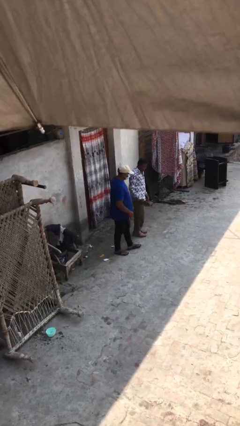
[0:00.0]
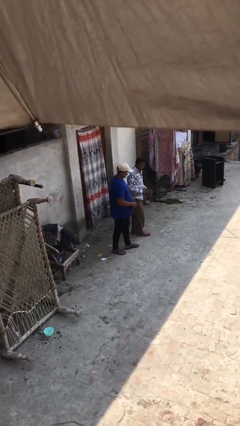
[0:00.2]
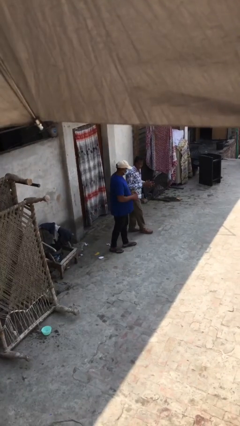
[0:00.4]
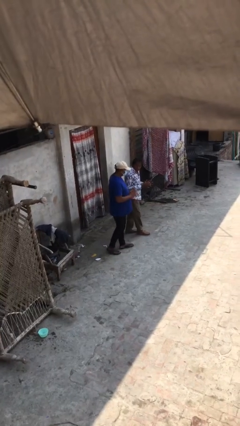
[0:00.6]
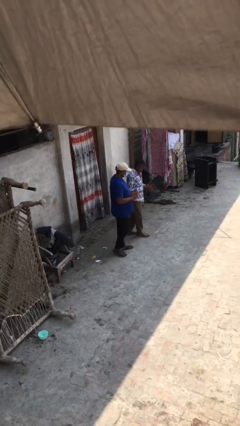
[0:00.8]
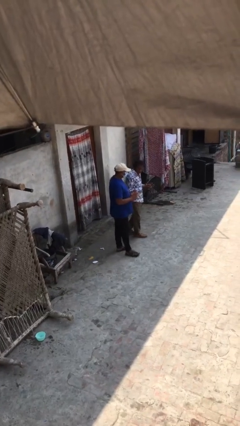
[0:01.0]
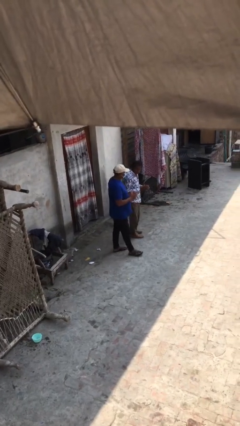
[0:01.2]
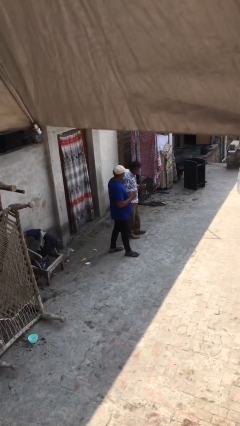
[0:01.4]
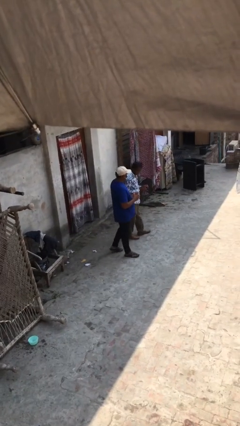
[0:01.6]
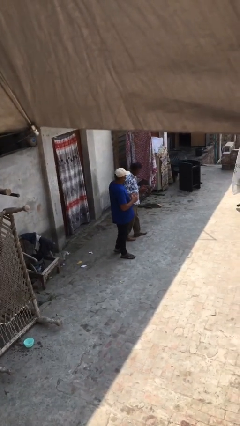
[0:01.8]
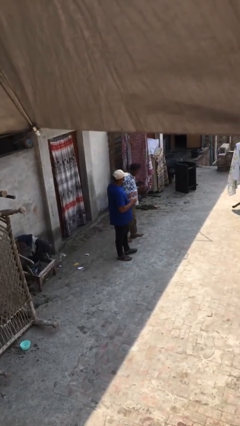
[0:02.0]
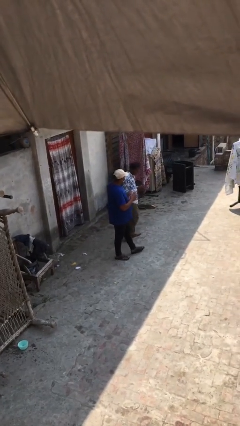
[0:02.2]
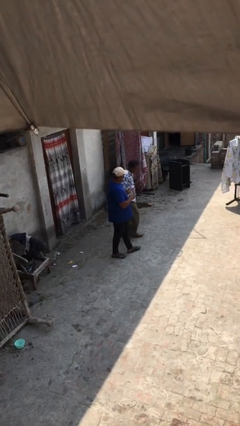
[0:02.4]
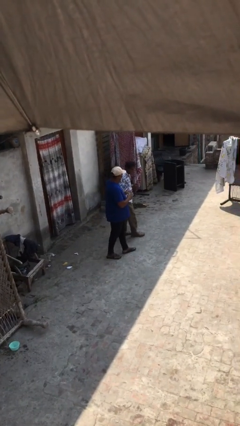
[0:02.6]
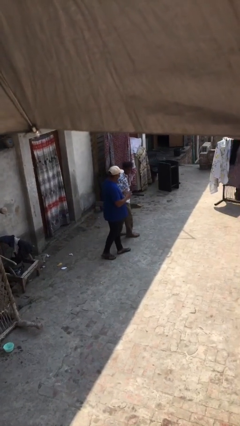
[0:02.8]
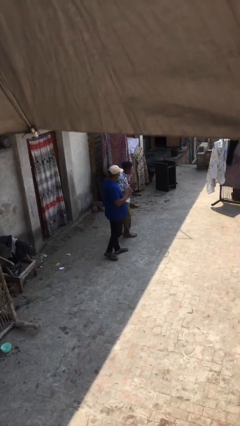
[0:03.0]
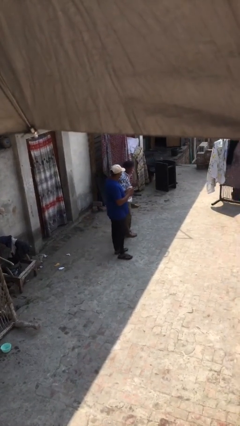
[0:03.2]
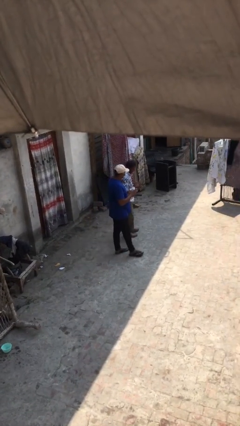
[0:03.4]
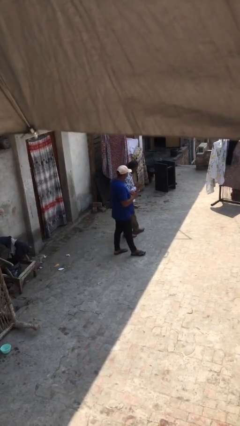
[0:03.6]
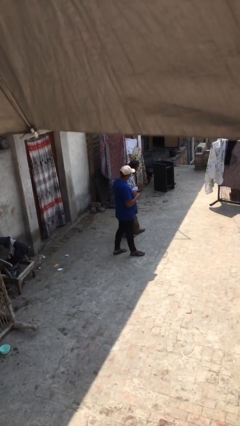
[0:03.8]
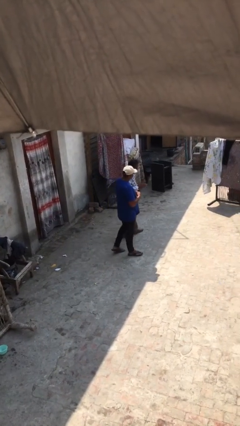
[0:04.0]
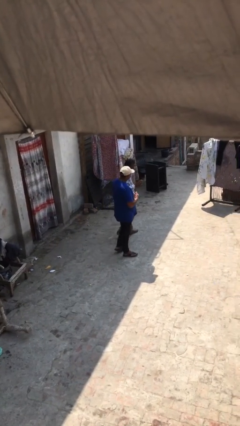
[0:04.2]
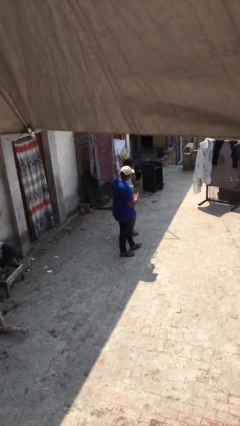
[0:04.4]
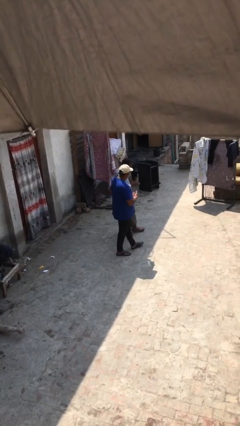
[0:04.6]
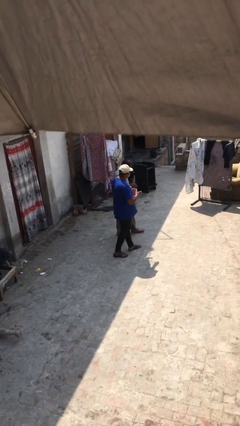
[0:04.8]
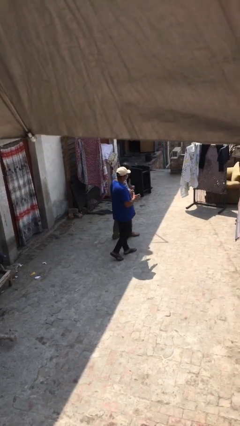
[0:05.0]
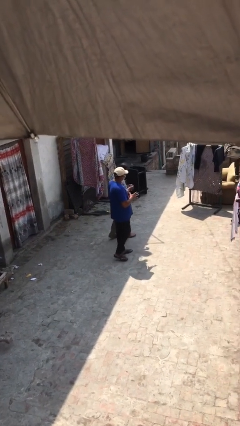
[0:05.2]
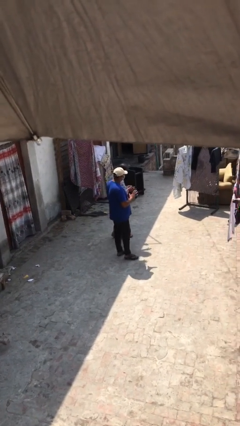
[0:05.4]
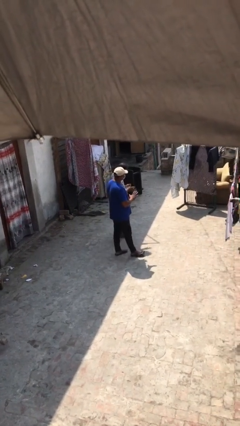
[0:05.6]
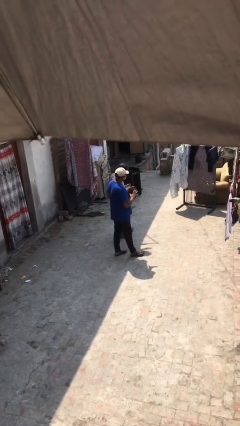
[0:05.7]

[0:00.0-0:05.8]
person talks to person

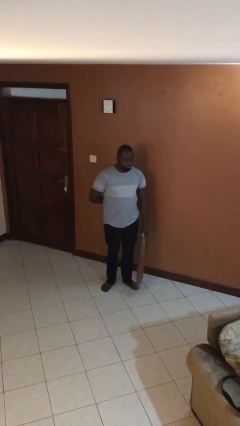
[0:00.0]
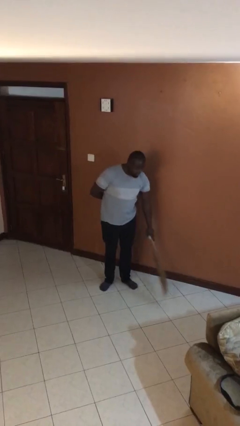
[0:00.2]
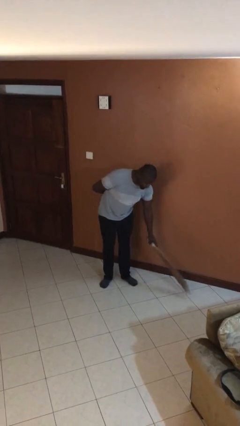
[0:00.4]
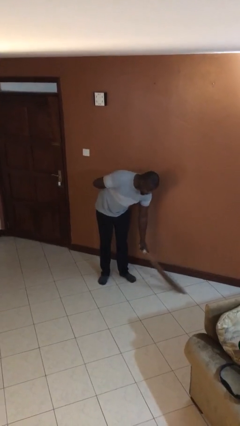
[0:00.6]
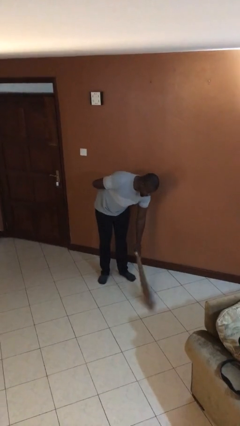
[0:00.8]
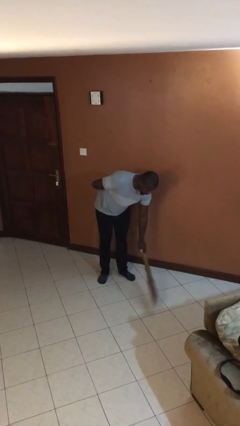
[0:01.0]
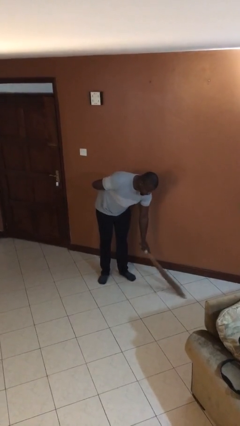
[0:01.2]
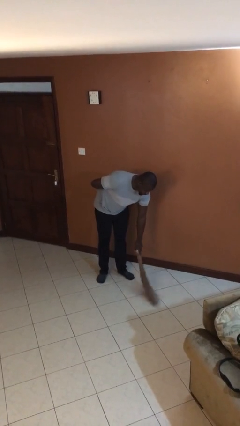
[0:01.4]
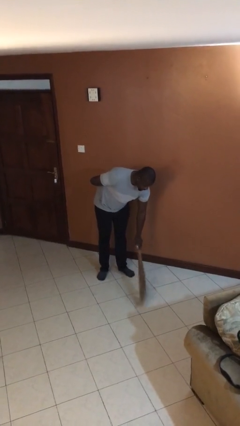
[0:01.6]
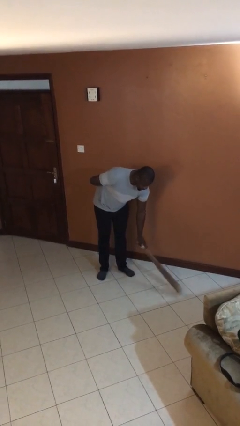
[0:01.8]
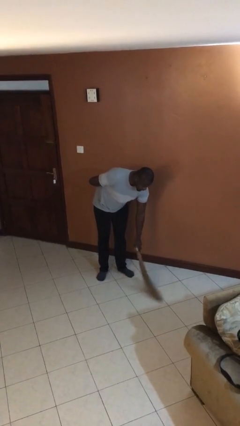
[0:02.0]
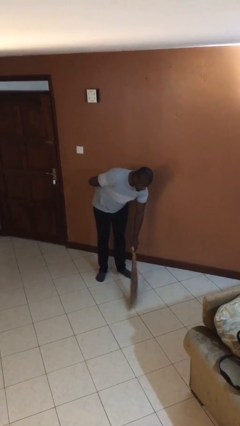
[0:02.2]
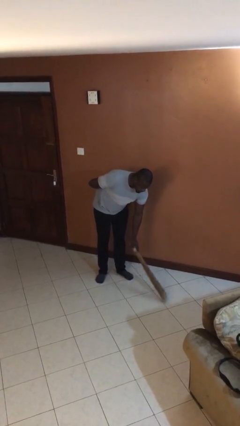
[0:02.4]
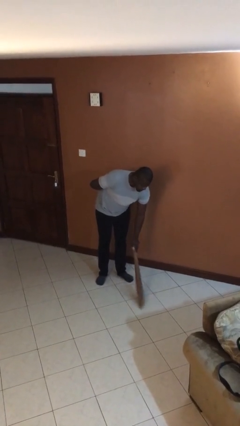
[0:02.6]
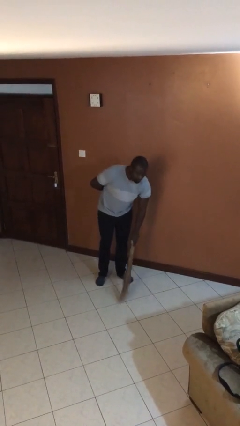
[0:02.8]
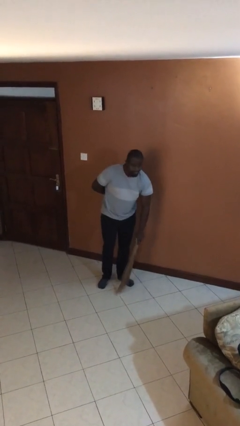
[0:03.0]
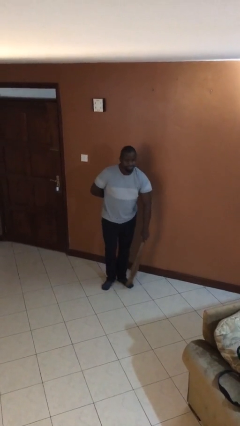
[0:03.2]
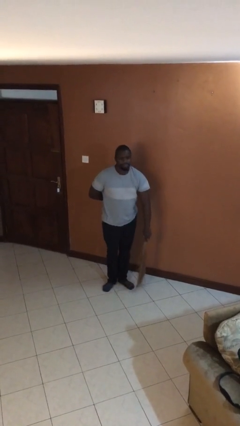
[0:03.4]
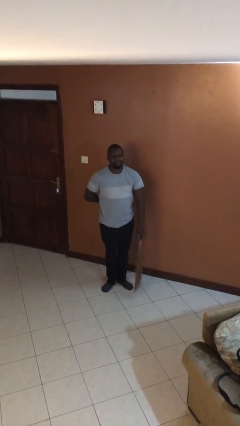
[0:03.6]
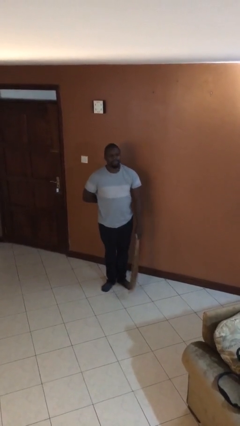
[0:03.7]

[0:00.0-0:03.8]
person sweeps floor

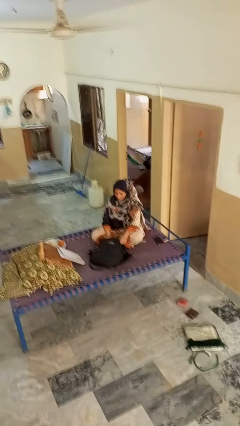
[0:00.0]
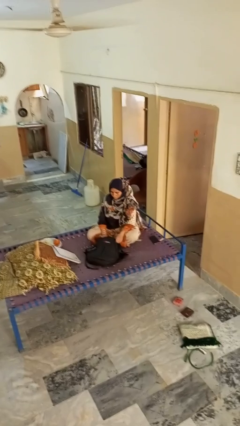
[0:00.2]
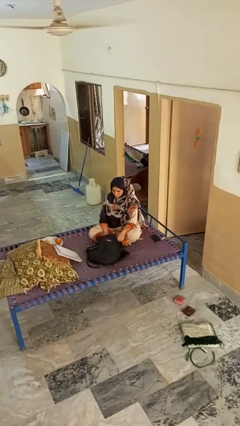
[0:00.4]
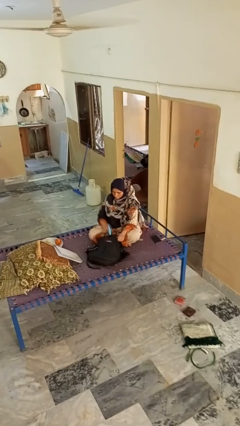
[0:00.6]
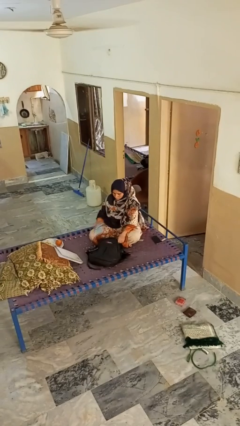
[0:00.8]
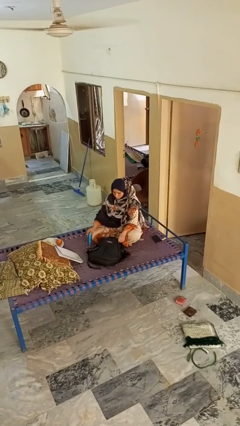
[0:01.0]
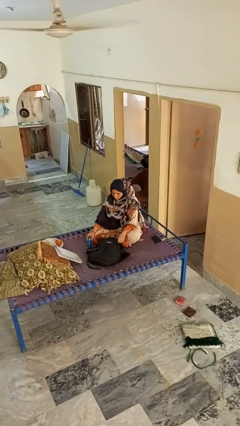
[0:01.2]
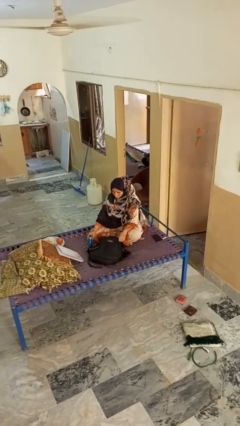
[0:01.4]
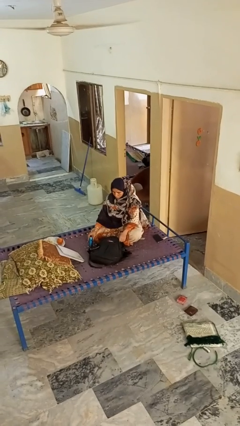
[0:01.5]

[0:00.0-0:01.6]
person takes object from bag

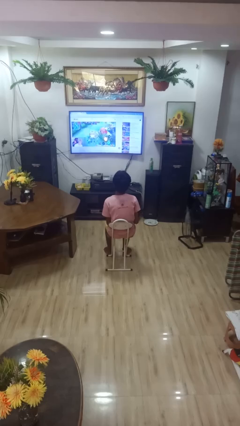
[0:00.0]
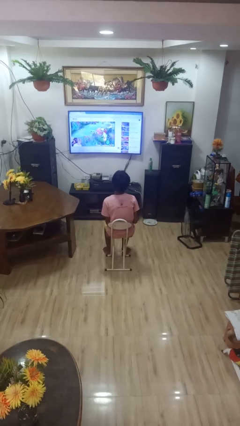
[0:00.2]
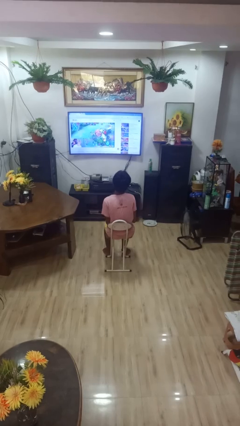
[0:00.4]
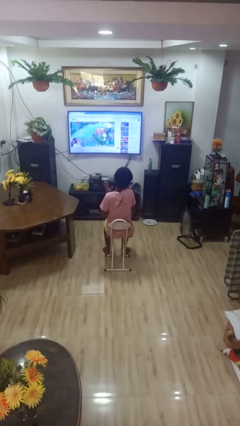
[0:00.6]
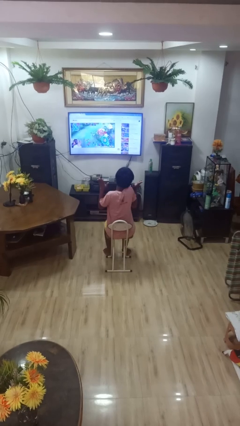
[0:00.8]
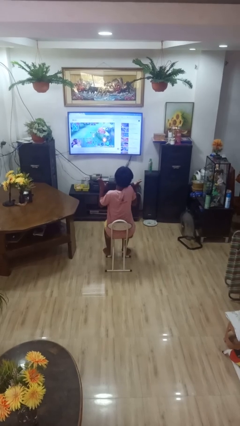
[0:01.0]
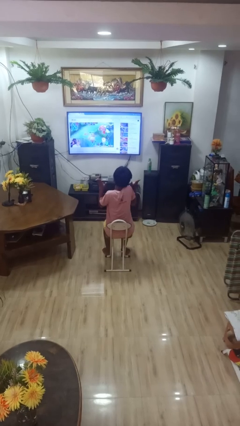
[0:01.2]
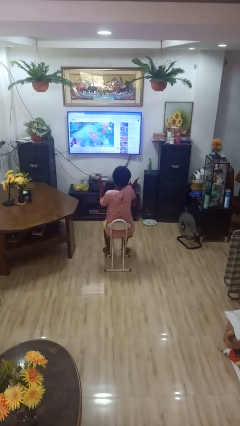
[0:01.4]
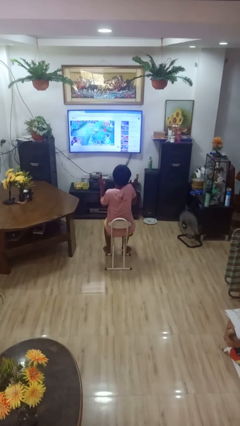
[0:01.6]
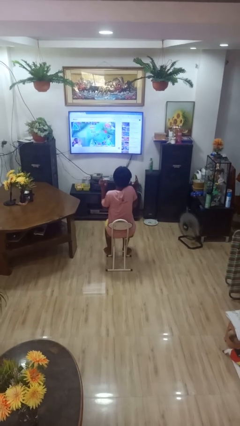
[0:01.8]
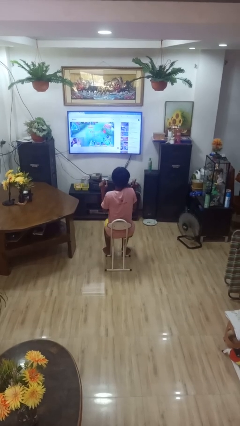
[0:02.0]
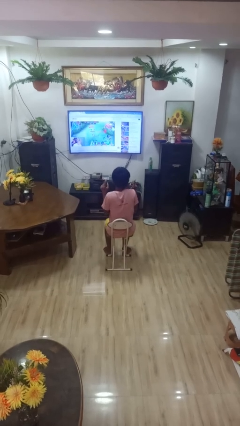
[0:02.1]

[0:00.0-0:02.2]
person shrugs

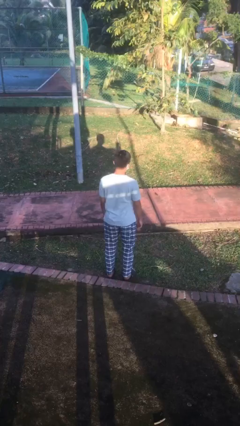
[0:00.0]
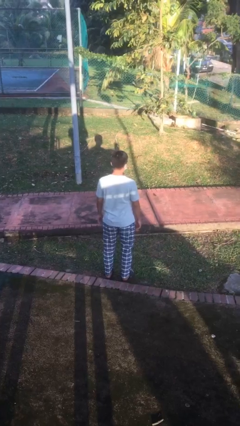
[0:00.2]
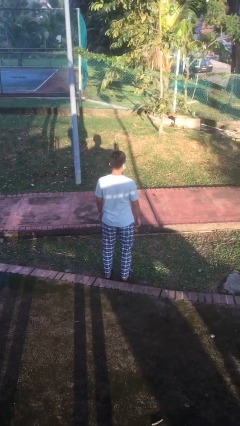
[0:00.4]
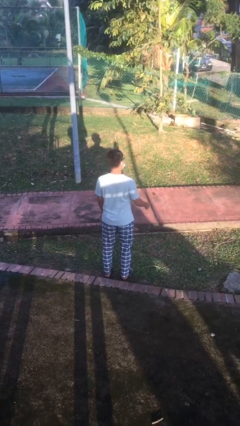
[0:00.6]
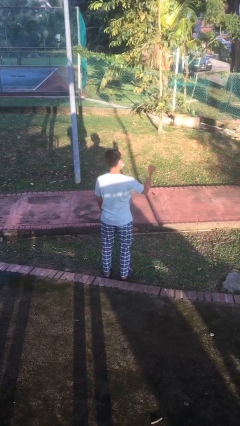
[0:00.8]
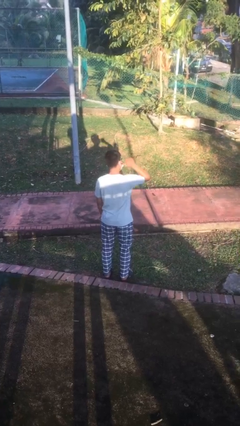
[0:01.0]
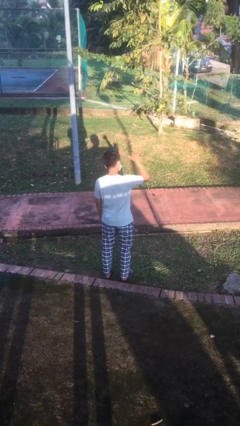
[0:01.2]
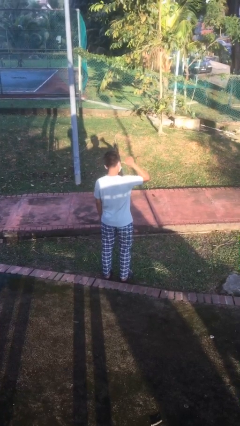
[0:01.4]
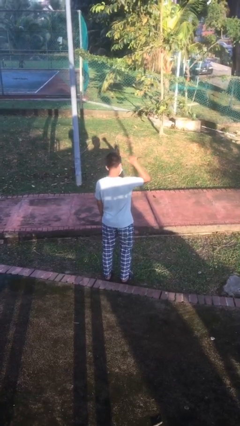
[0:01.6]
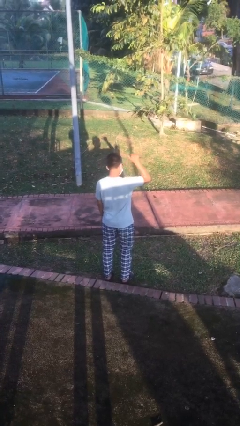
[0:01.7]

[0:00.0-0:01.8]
person gestures behind me

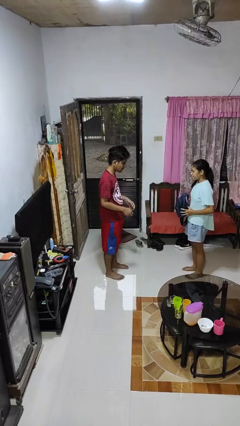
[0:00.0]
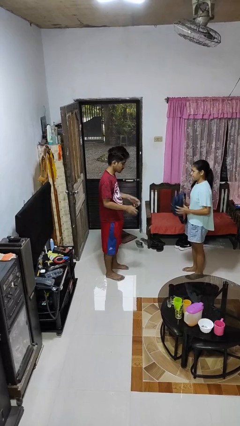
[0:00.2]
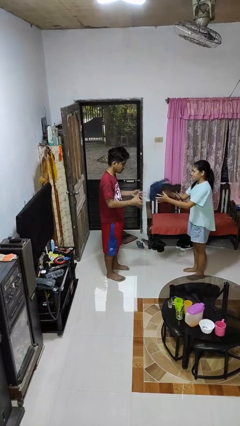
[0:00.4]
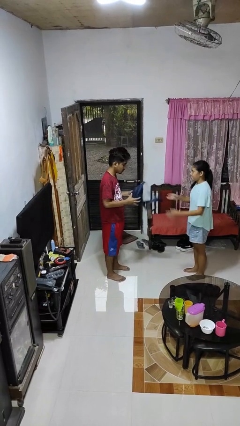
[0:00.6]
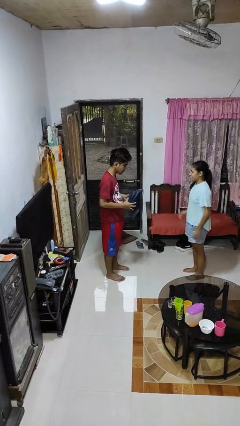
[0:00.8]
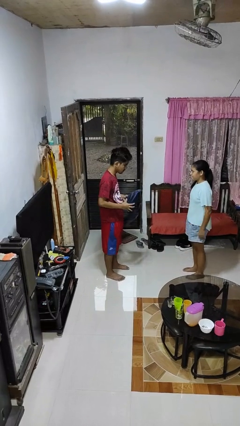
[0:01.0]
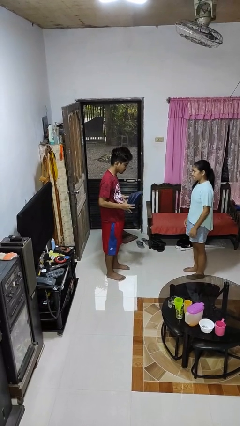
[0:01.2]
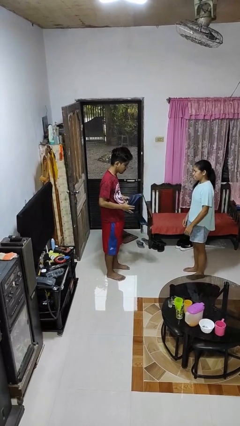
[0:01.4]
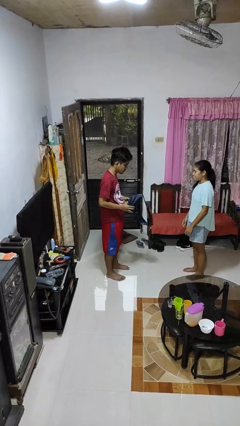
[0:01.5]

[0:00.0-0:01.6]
person catches object from person

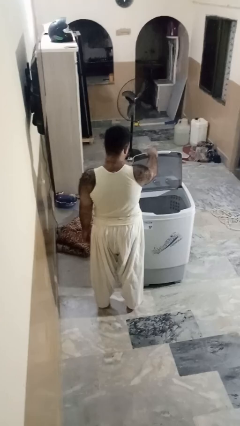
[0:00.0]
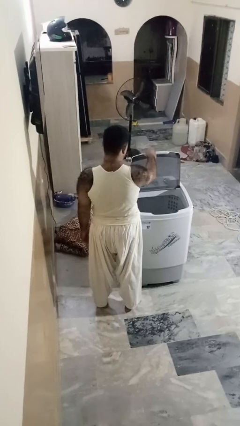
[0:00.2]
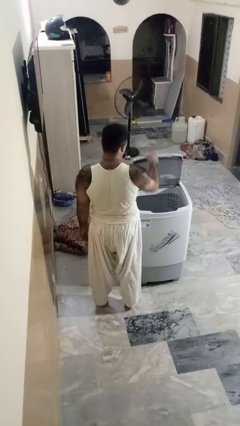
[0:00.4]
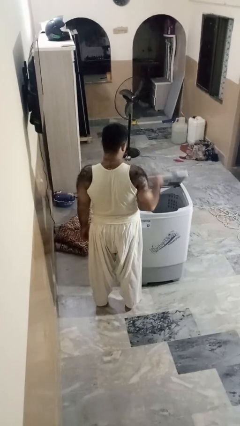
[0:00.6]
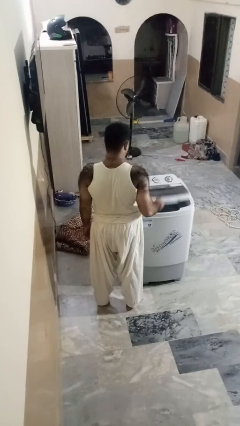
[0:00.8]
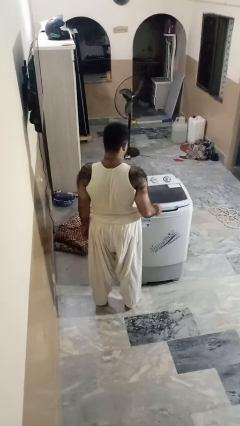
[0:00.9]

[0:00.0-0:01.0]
person closes clothes washer
